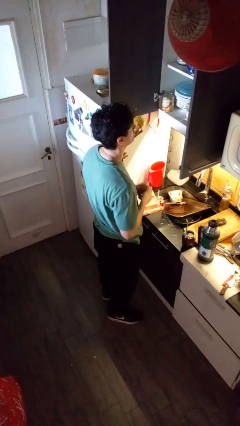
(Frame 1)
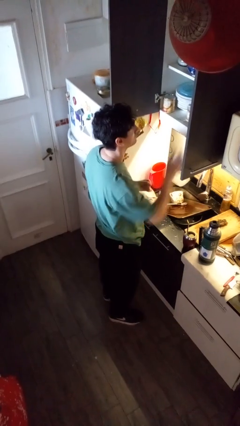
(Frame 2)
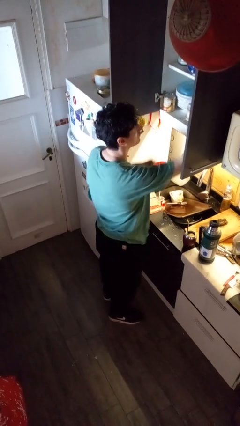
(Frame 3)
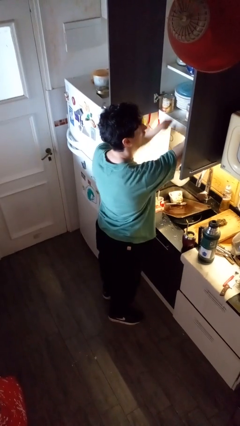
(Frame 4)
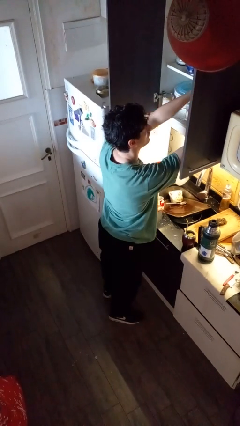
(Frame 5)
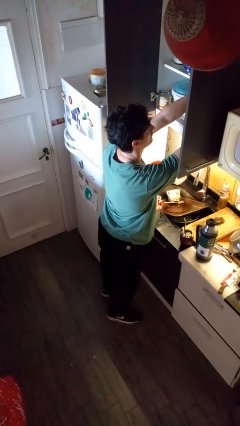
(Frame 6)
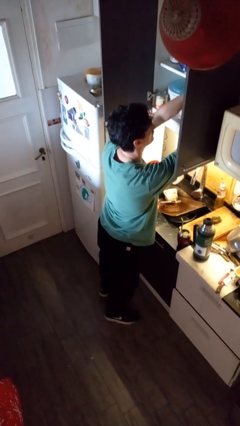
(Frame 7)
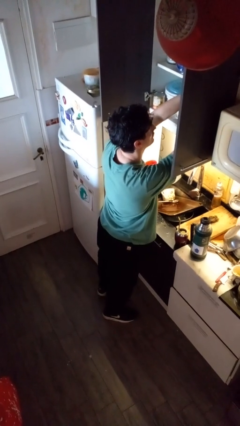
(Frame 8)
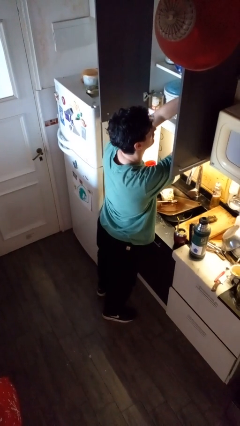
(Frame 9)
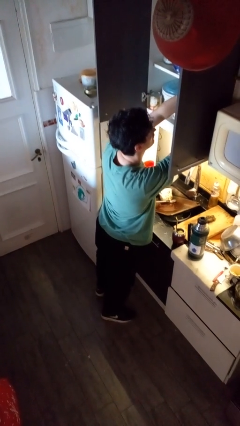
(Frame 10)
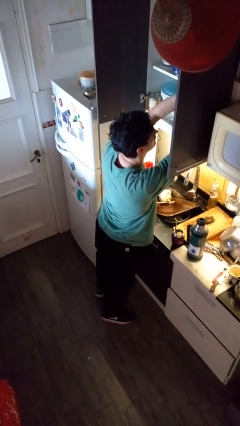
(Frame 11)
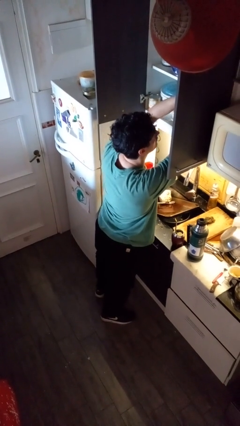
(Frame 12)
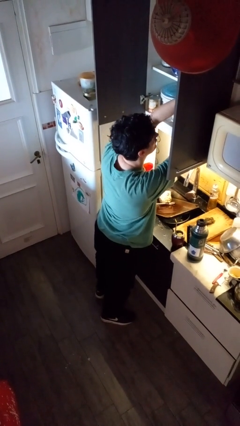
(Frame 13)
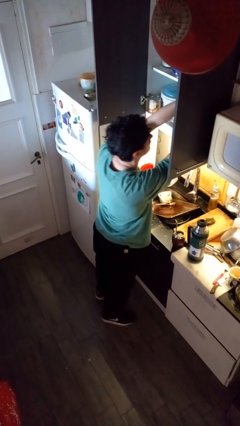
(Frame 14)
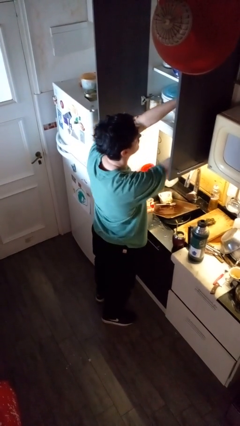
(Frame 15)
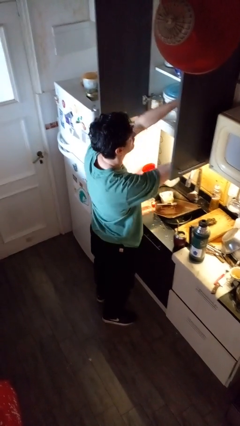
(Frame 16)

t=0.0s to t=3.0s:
person searches in kitchen drawer

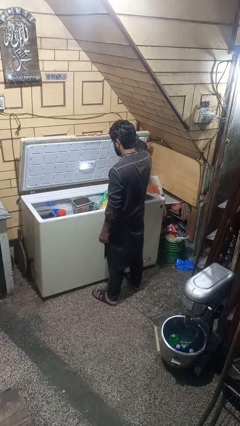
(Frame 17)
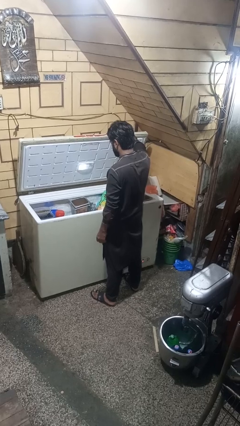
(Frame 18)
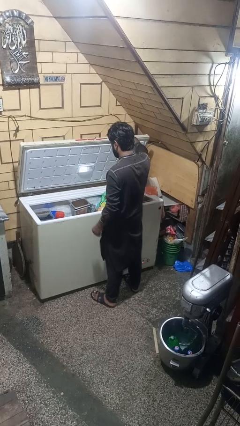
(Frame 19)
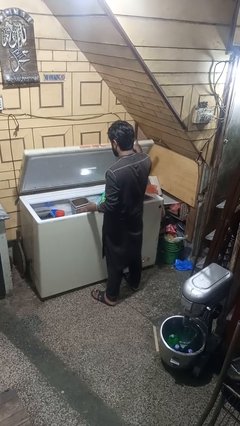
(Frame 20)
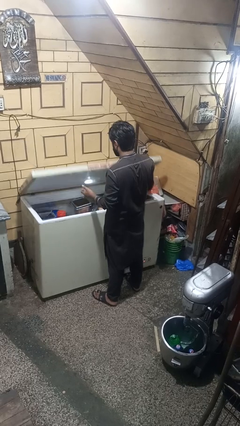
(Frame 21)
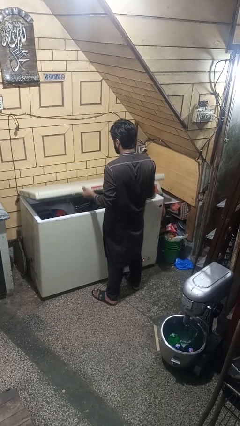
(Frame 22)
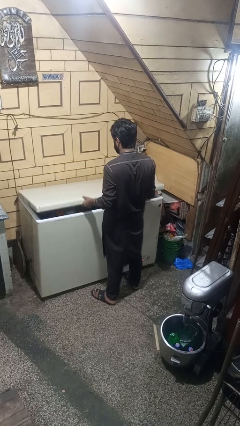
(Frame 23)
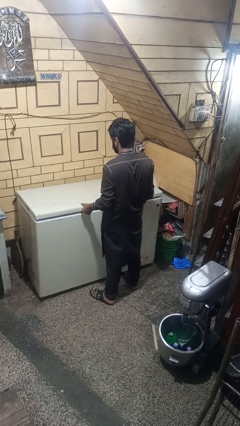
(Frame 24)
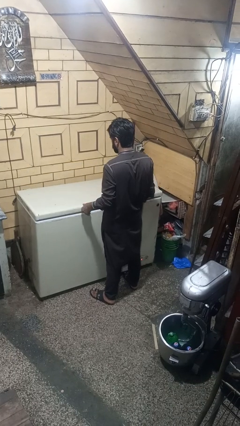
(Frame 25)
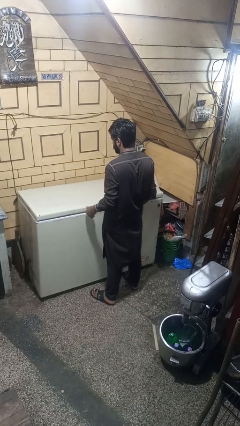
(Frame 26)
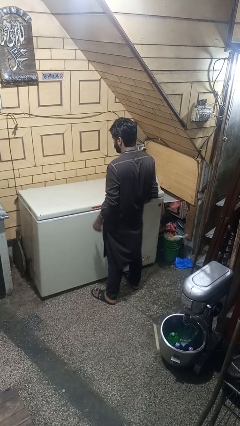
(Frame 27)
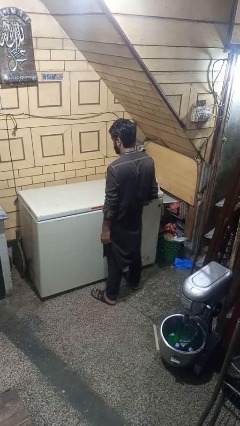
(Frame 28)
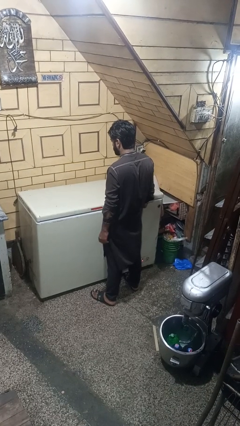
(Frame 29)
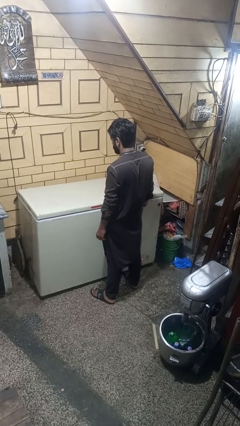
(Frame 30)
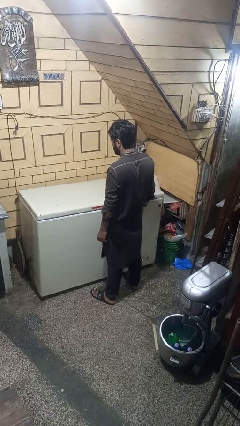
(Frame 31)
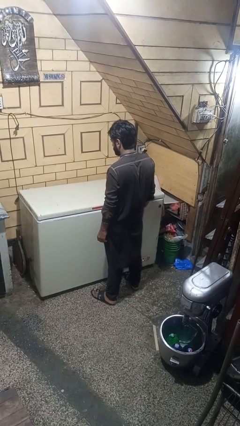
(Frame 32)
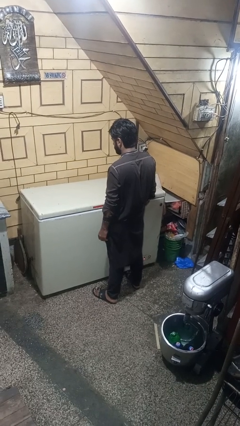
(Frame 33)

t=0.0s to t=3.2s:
person closes refrigerator

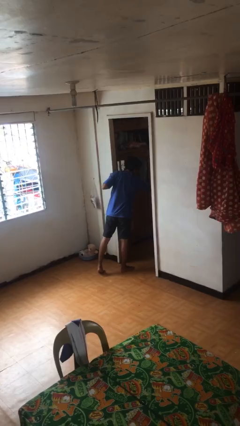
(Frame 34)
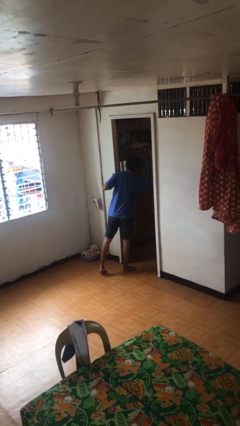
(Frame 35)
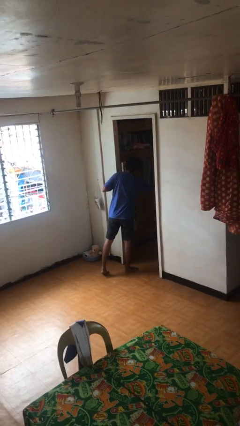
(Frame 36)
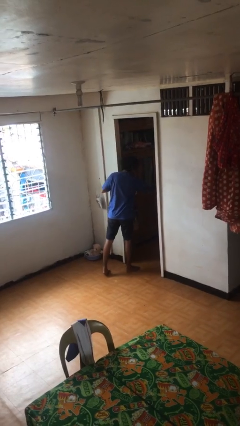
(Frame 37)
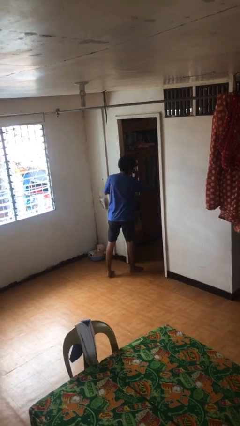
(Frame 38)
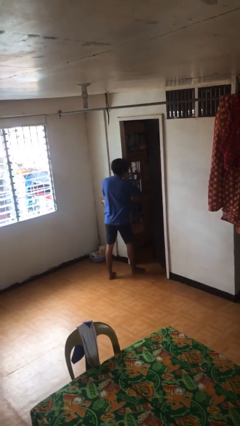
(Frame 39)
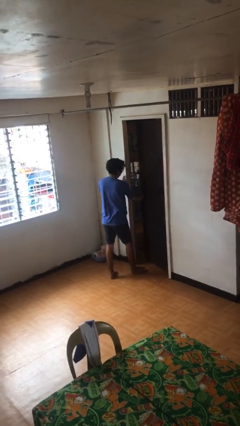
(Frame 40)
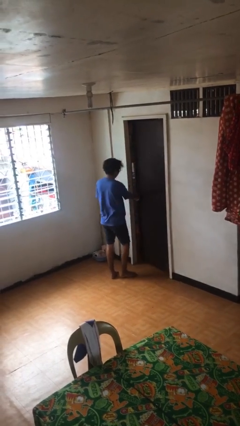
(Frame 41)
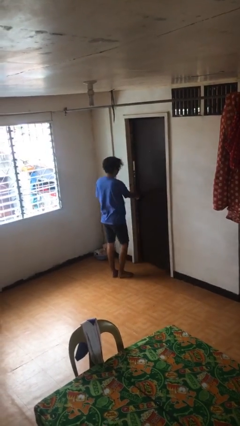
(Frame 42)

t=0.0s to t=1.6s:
person closes facility door

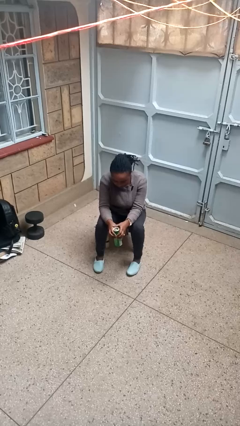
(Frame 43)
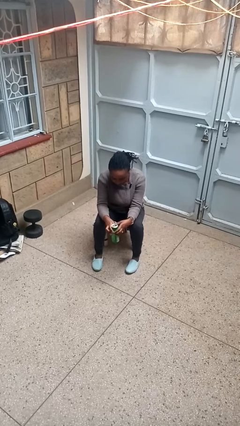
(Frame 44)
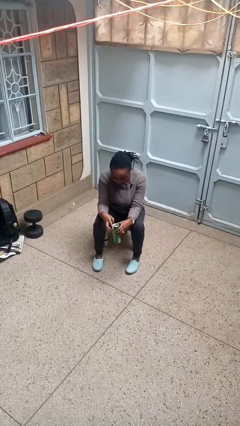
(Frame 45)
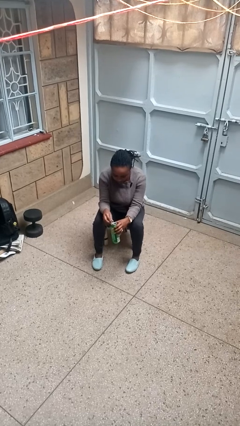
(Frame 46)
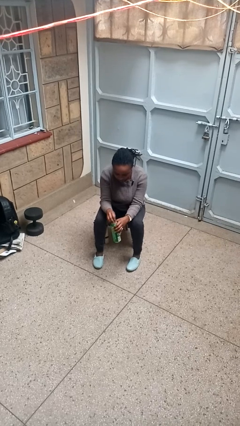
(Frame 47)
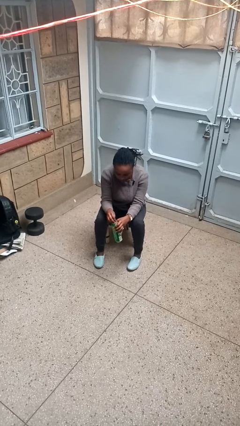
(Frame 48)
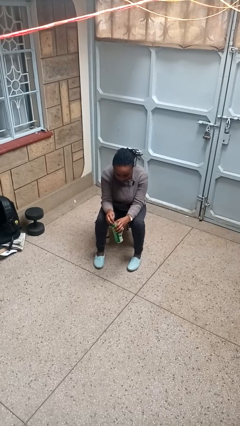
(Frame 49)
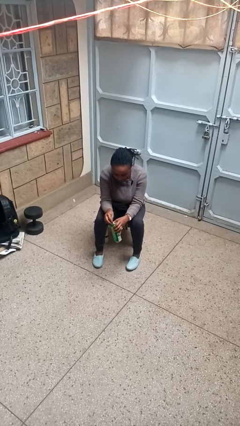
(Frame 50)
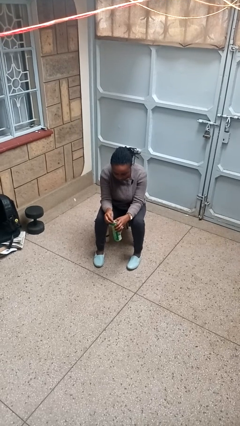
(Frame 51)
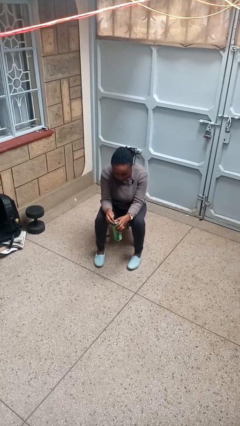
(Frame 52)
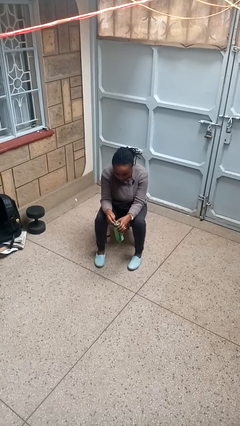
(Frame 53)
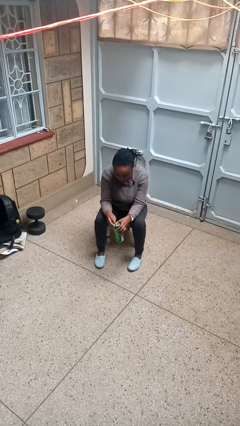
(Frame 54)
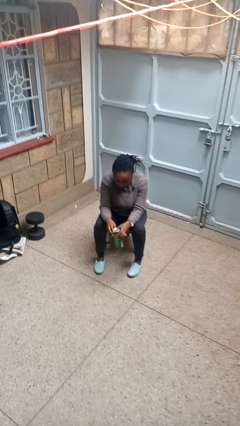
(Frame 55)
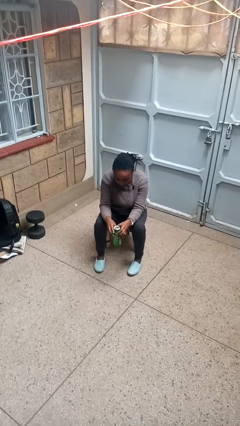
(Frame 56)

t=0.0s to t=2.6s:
person opens beverage can

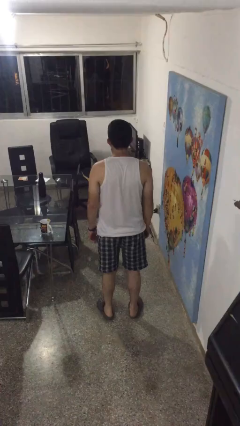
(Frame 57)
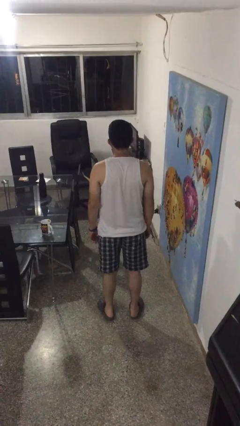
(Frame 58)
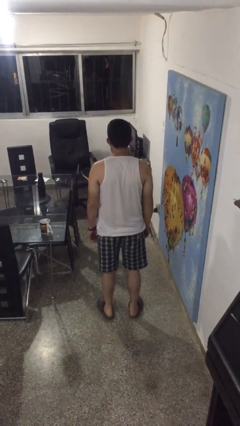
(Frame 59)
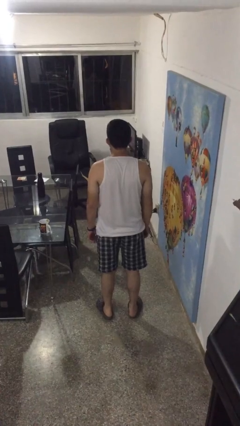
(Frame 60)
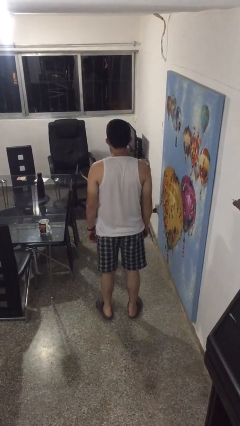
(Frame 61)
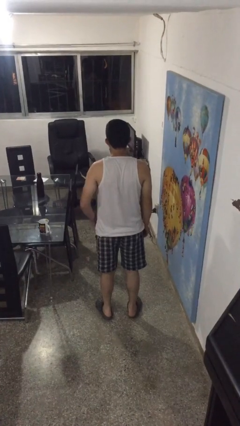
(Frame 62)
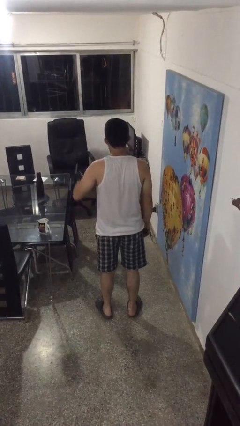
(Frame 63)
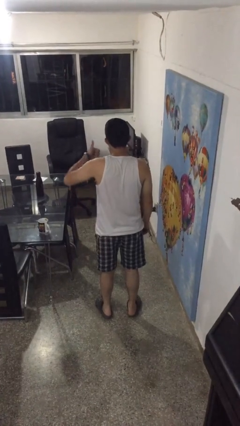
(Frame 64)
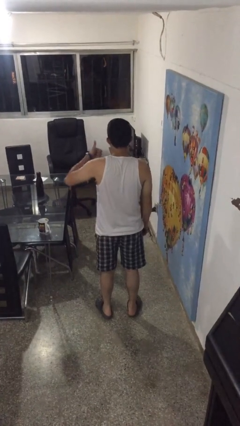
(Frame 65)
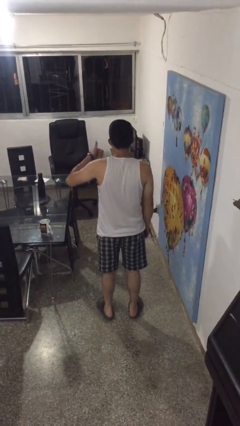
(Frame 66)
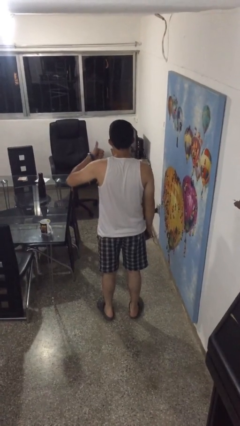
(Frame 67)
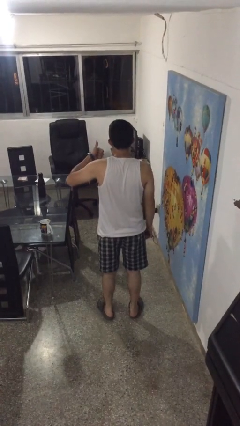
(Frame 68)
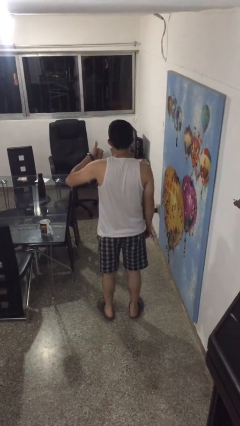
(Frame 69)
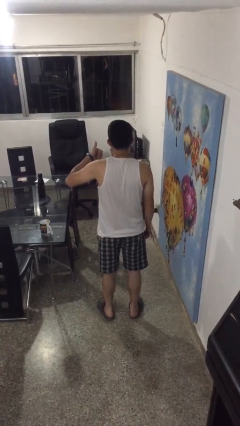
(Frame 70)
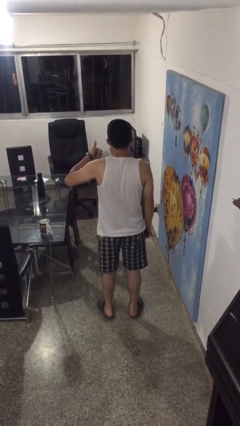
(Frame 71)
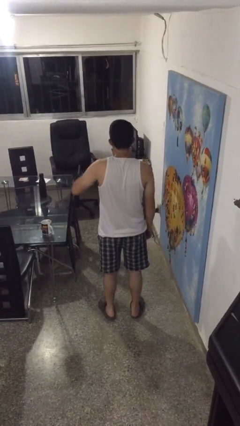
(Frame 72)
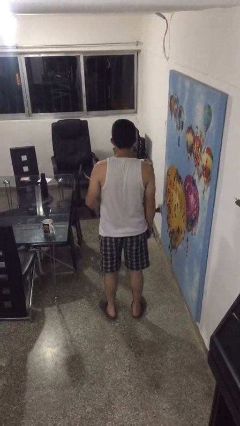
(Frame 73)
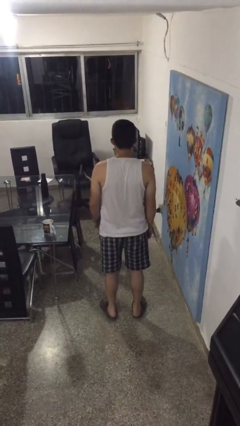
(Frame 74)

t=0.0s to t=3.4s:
person gestures thumbs up

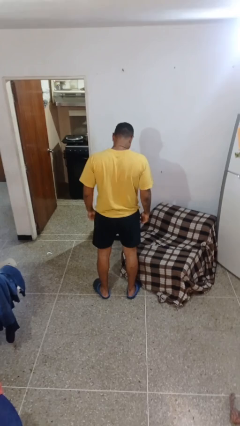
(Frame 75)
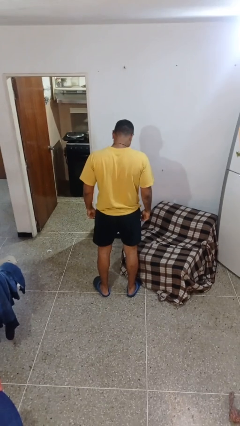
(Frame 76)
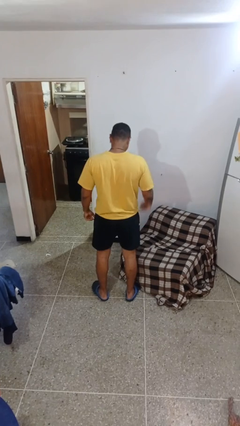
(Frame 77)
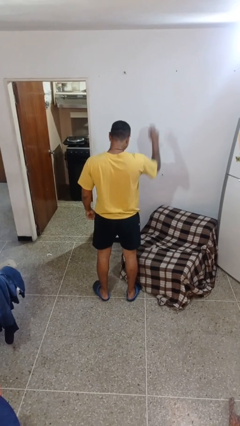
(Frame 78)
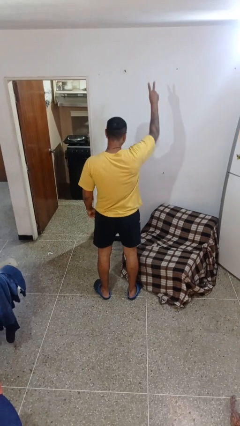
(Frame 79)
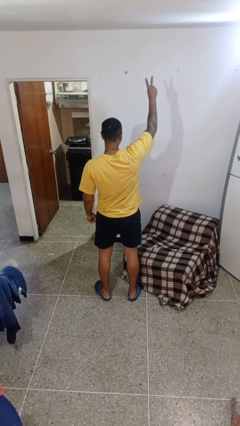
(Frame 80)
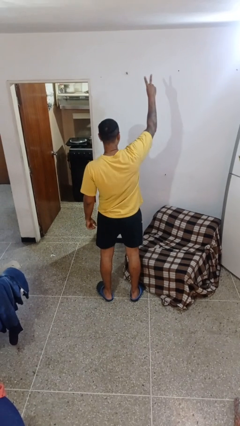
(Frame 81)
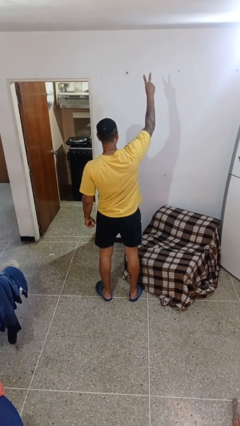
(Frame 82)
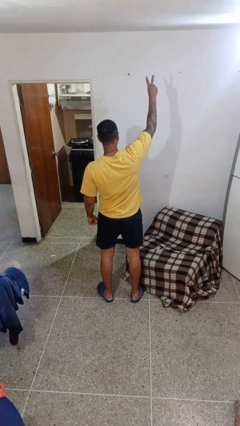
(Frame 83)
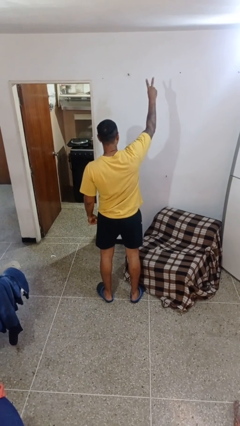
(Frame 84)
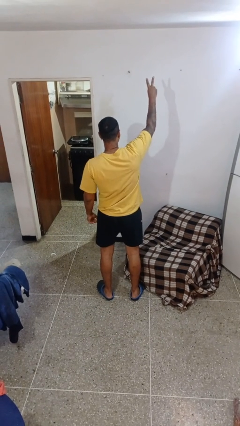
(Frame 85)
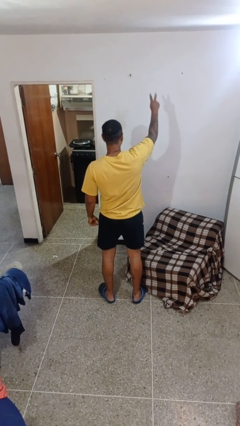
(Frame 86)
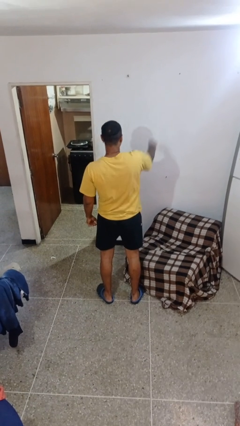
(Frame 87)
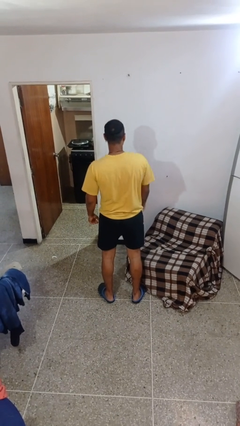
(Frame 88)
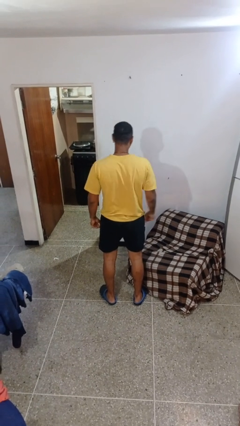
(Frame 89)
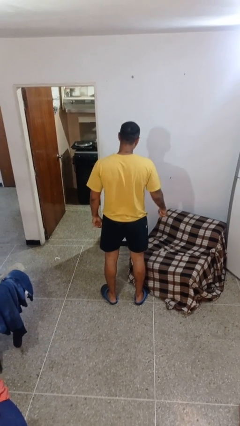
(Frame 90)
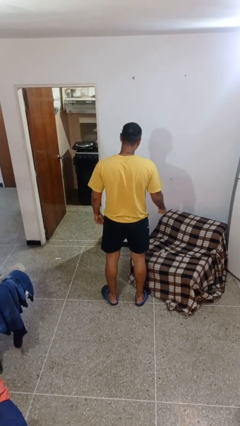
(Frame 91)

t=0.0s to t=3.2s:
person gestures peace

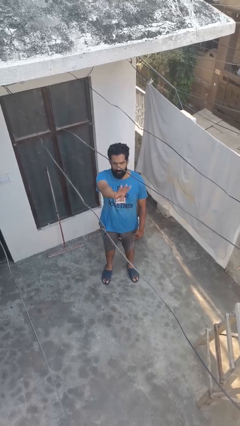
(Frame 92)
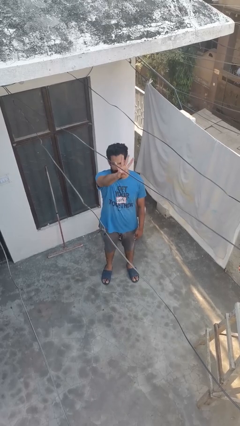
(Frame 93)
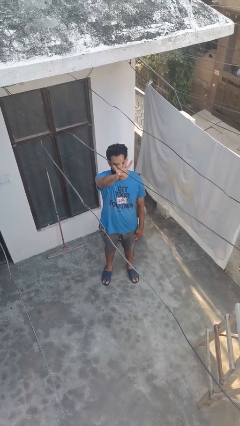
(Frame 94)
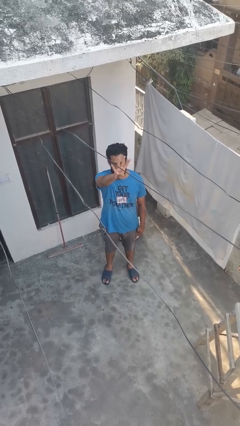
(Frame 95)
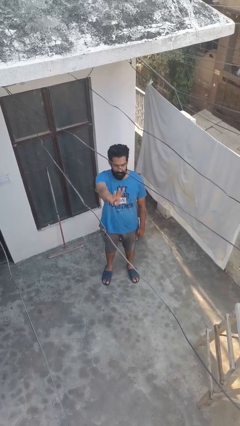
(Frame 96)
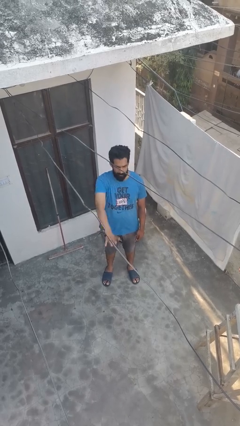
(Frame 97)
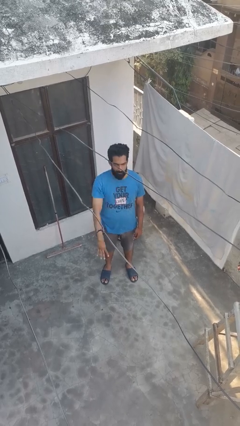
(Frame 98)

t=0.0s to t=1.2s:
person gestures number four
